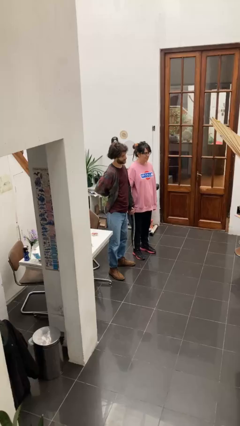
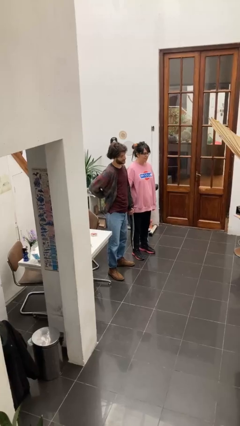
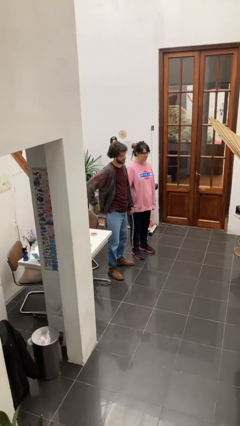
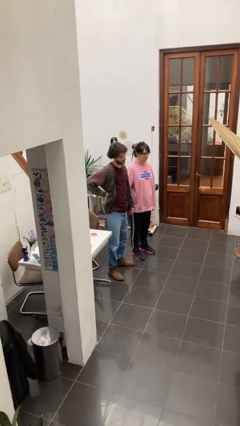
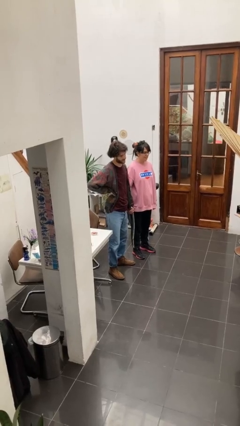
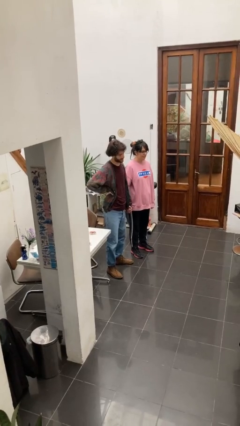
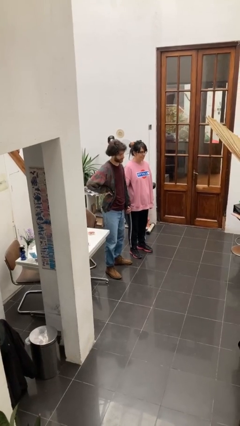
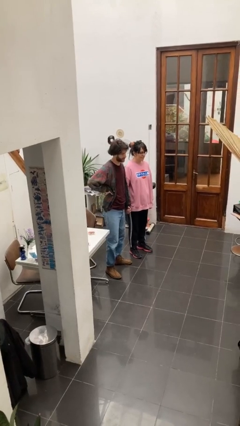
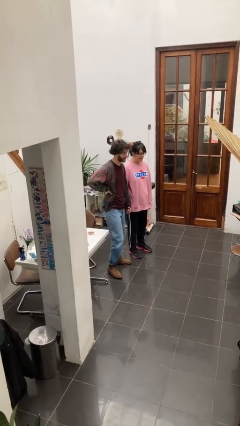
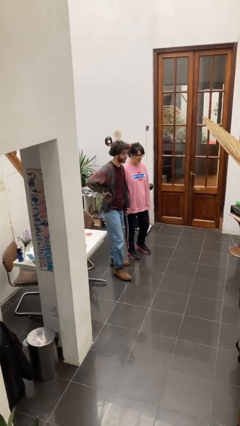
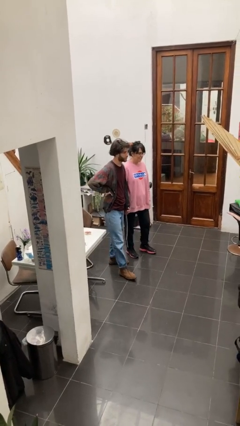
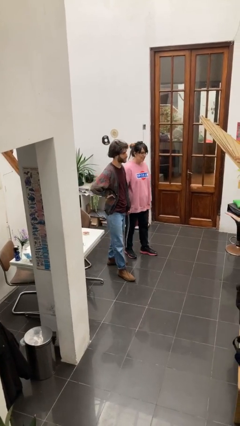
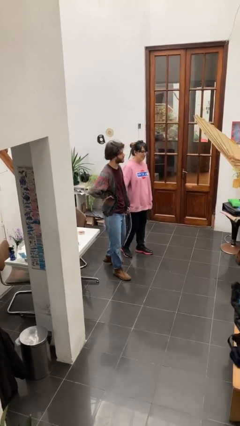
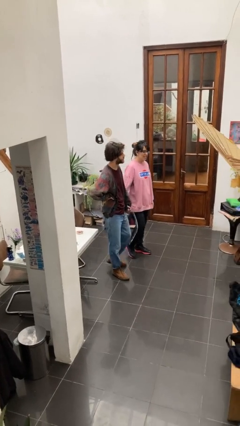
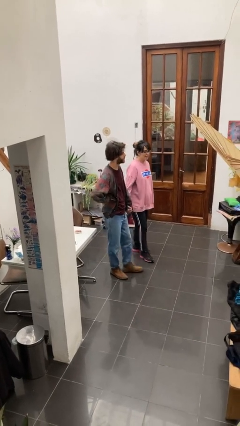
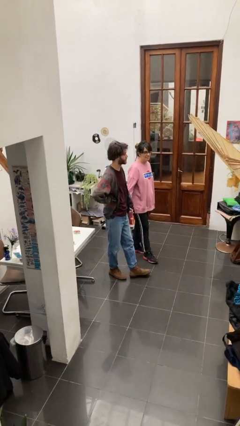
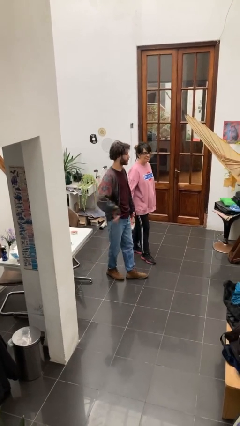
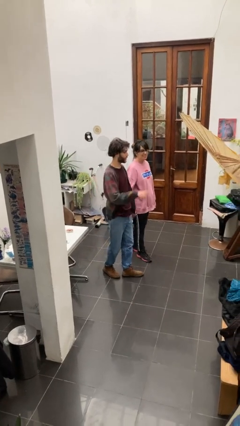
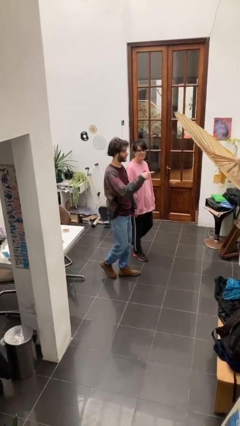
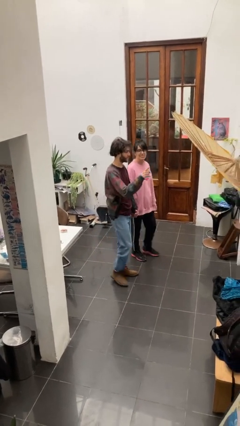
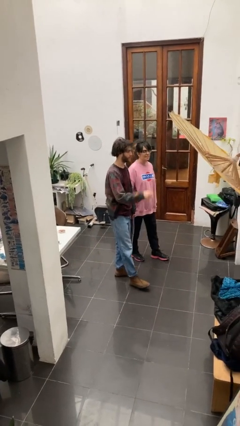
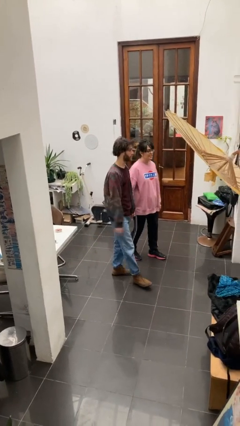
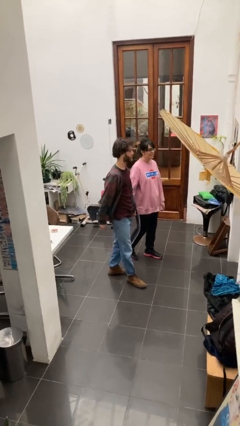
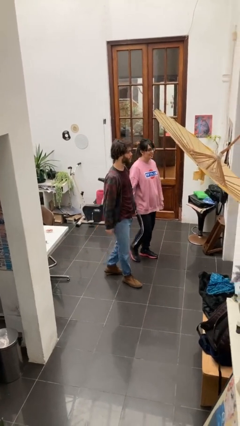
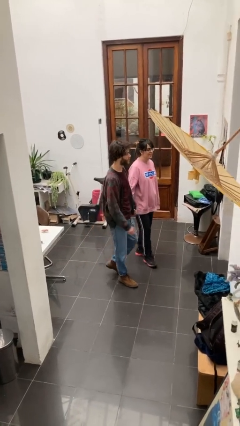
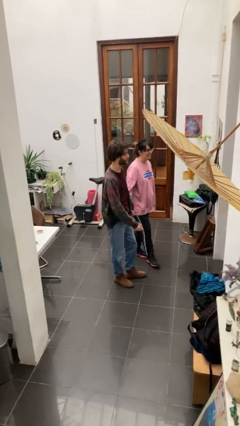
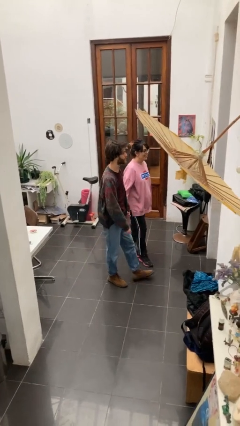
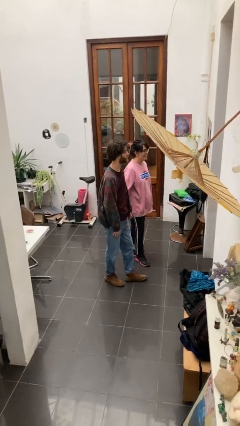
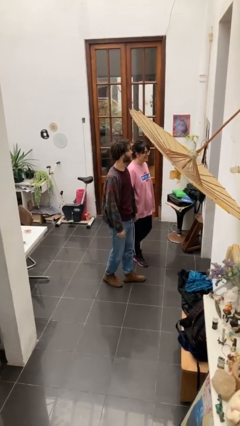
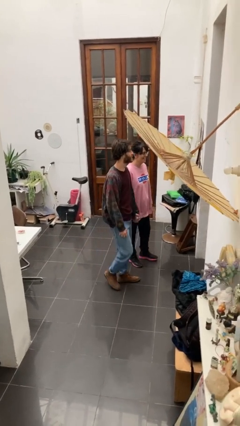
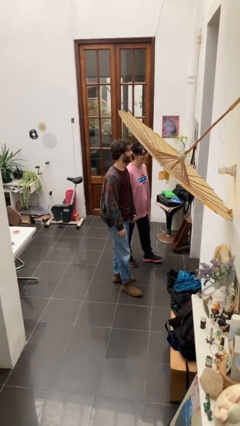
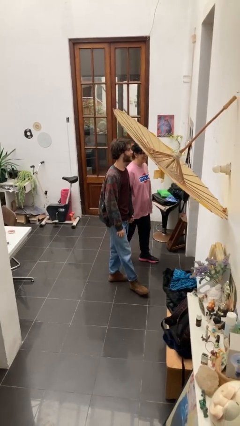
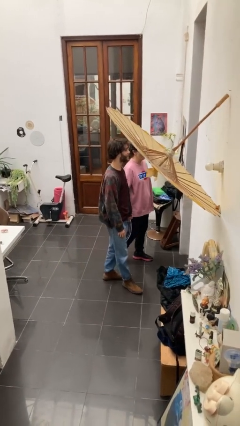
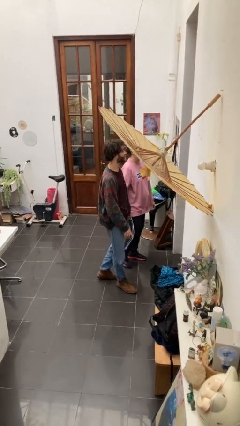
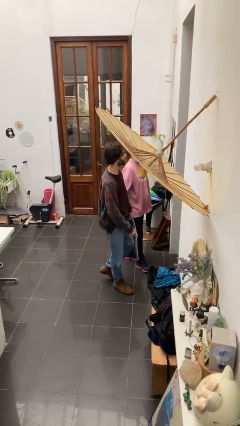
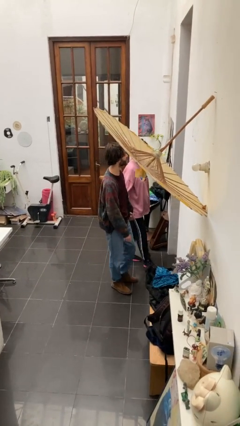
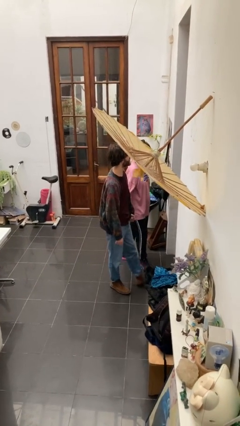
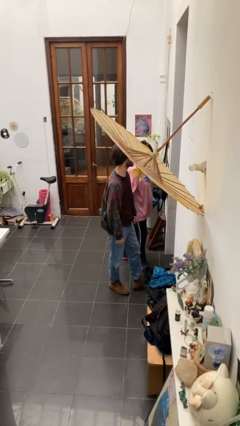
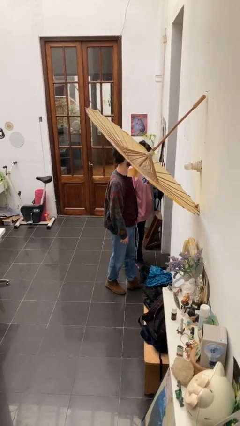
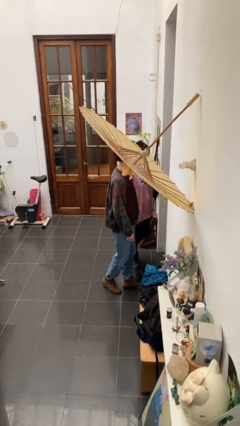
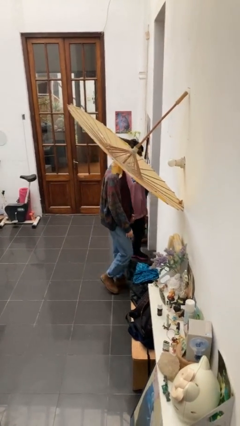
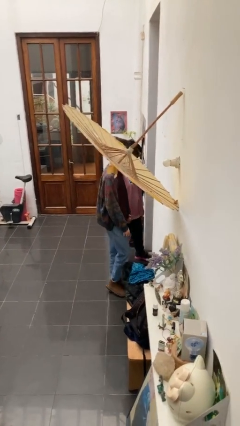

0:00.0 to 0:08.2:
person holds hand

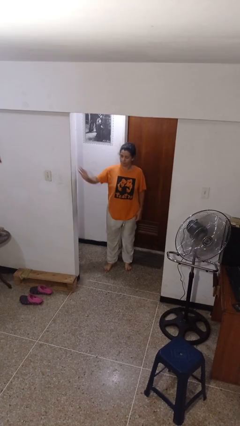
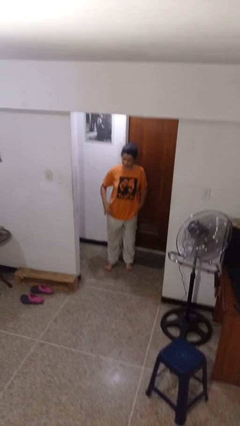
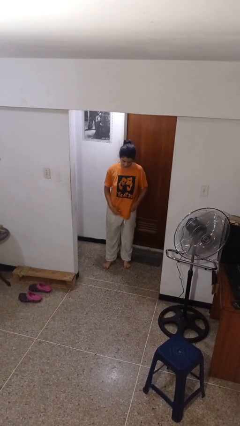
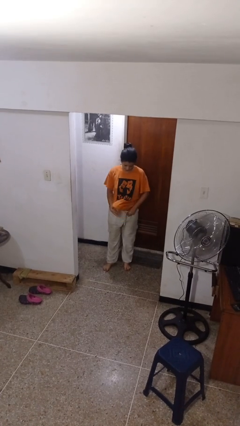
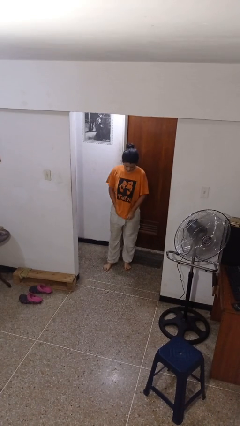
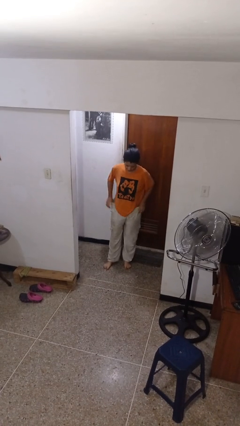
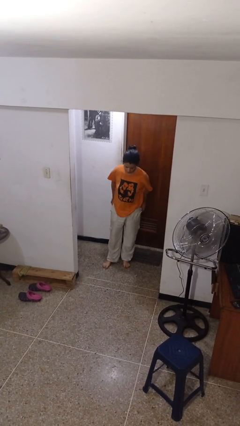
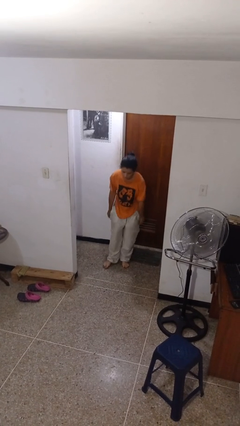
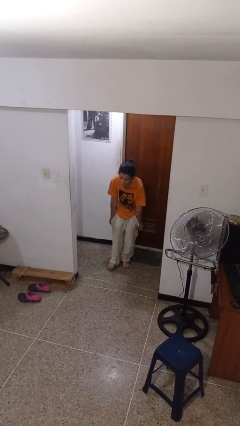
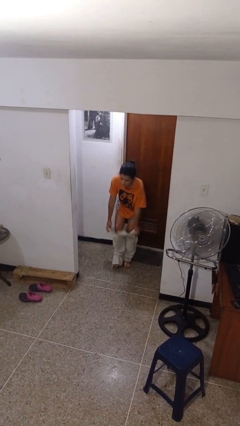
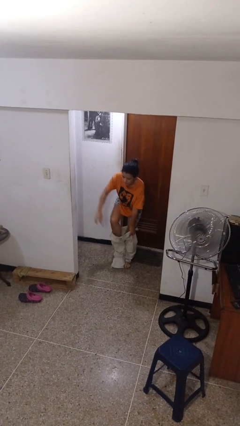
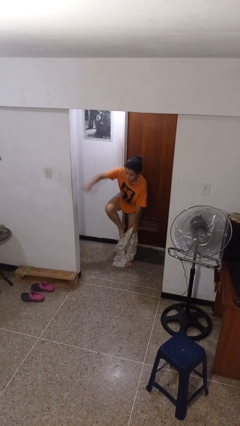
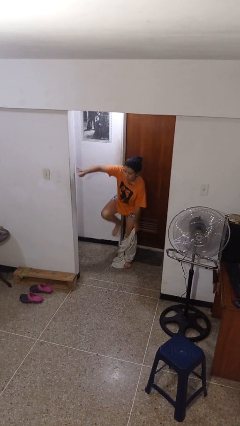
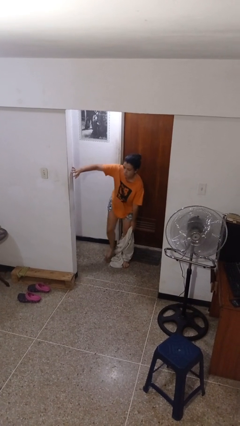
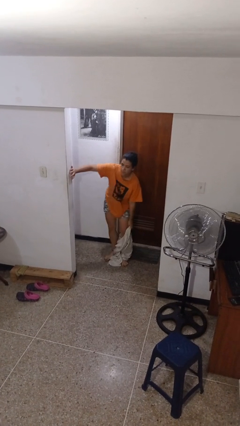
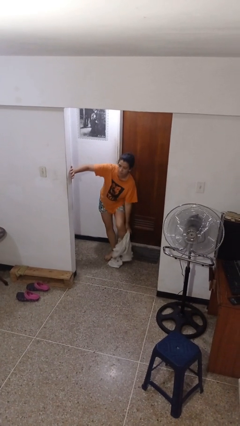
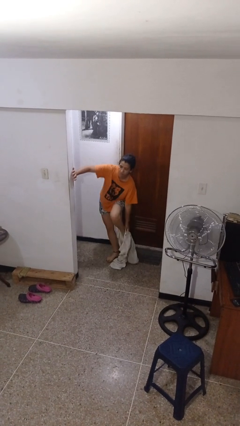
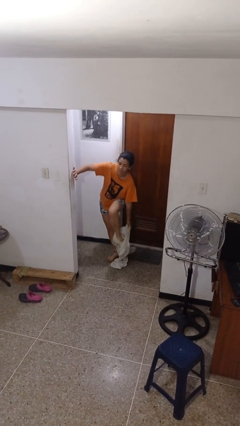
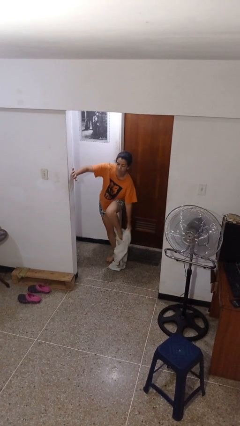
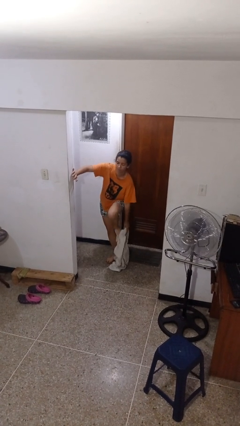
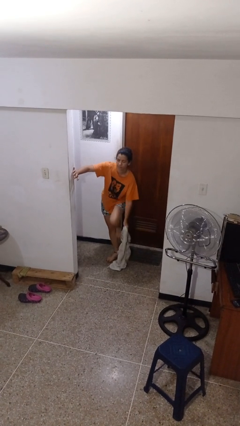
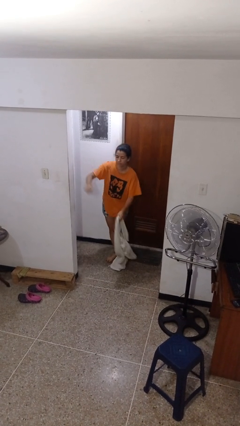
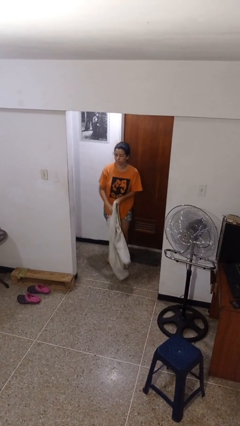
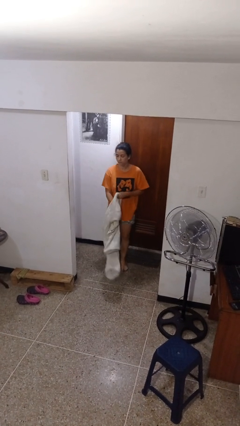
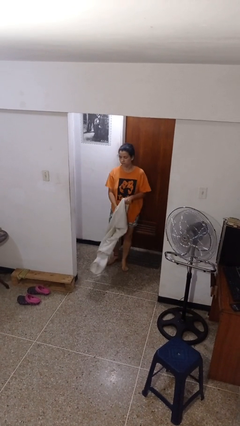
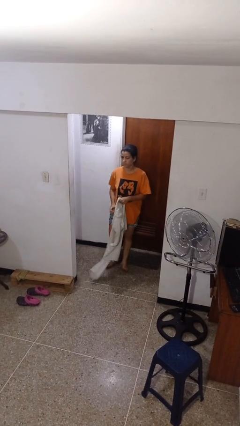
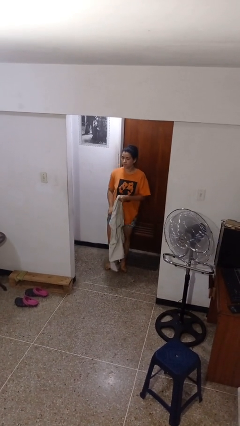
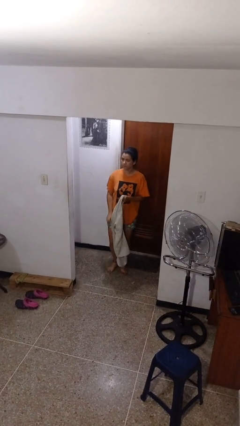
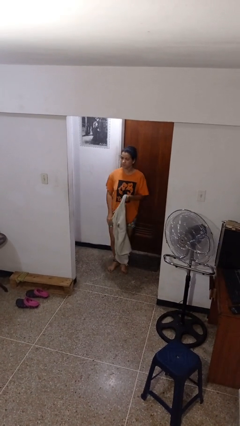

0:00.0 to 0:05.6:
person takes off pants

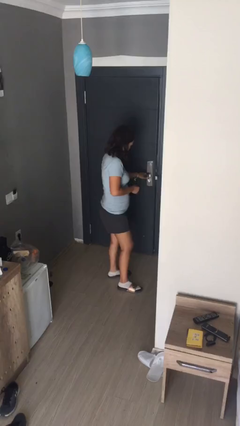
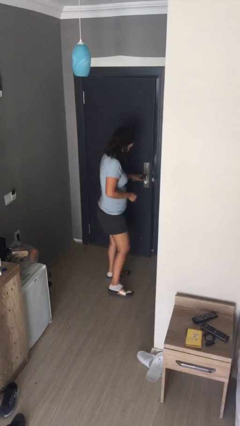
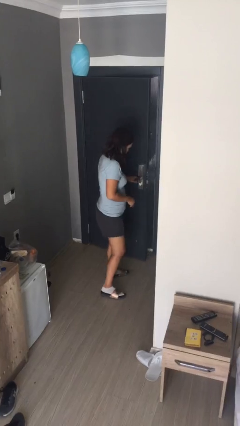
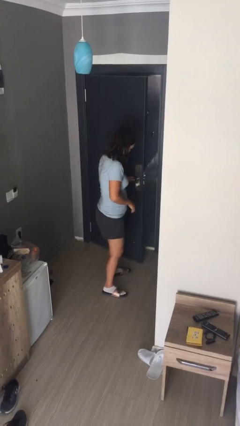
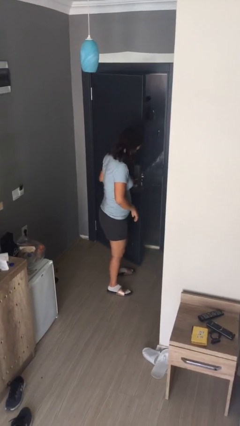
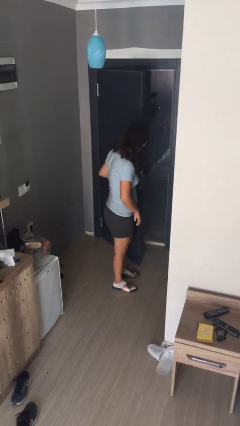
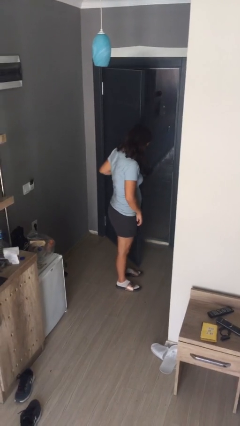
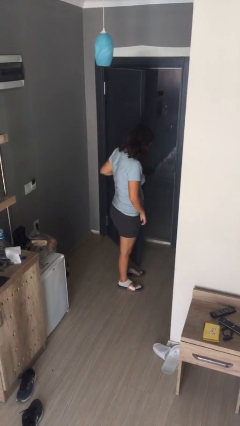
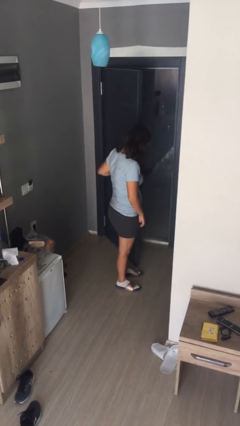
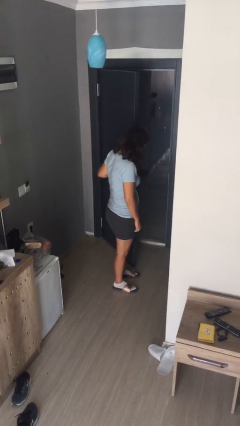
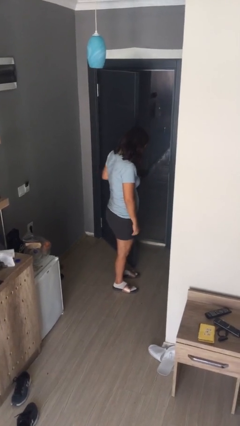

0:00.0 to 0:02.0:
person opens facility door

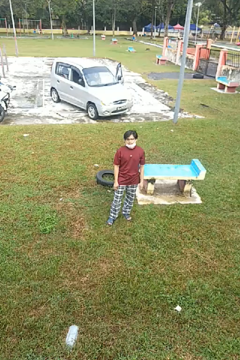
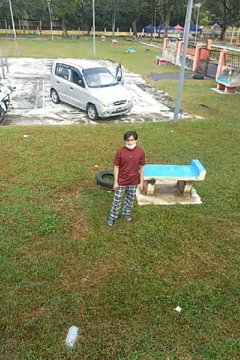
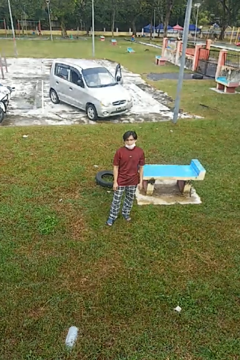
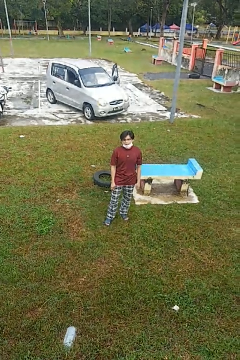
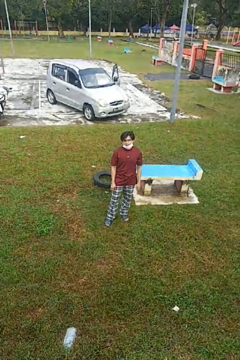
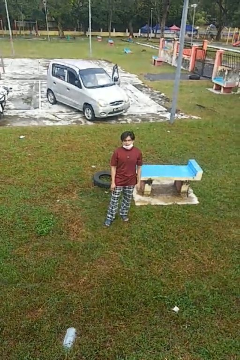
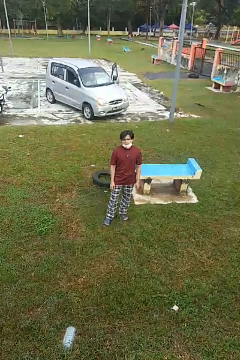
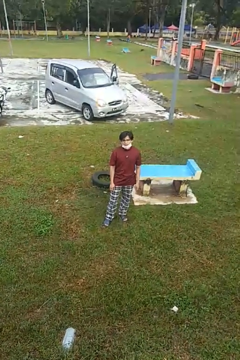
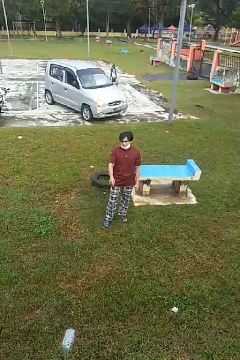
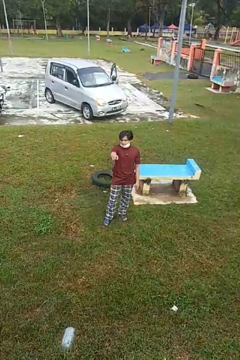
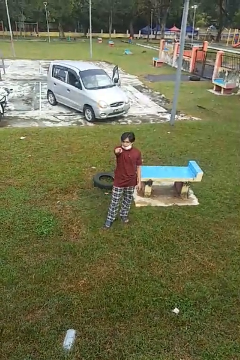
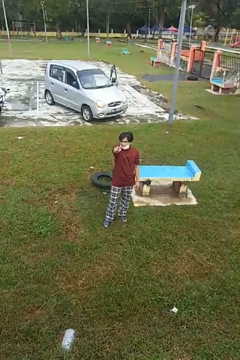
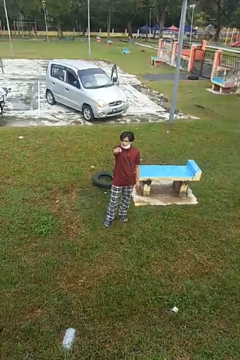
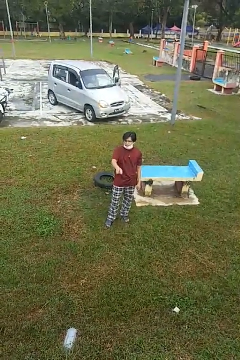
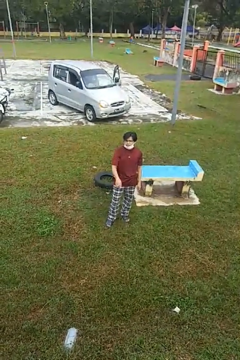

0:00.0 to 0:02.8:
person points at person
